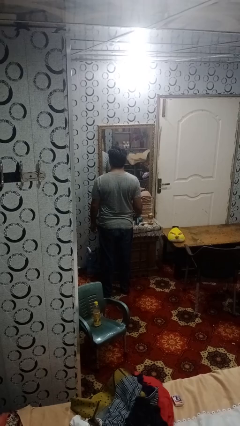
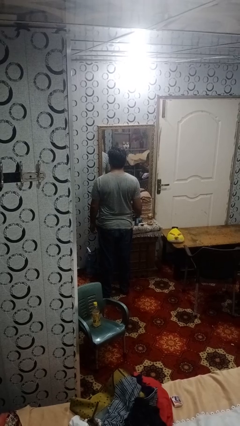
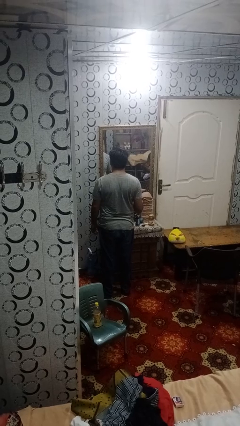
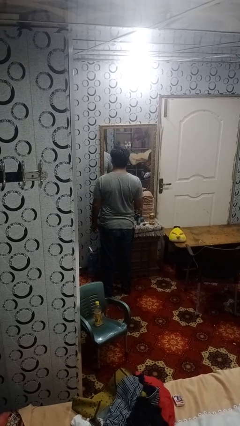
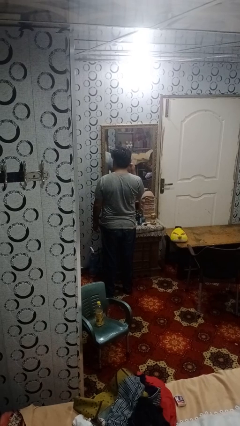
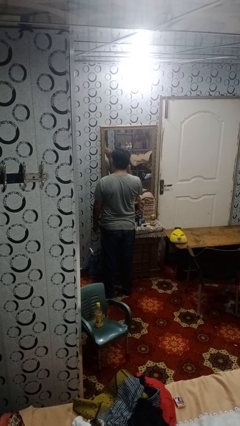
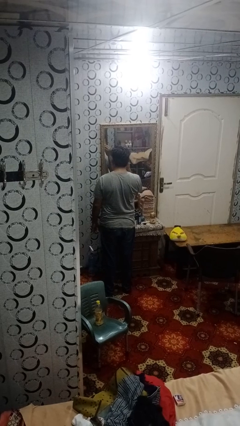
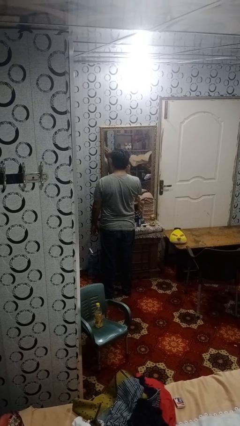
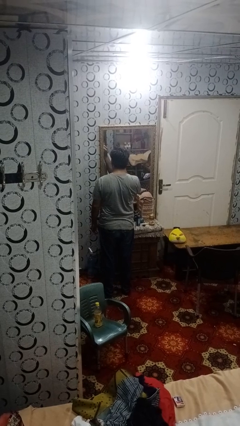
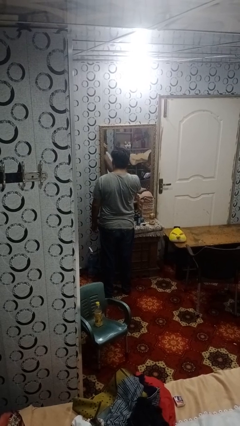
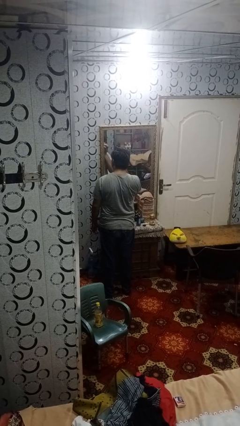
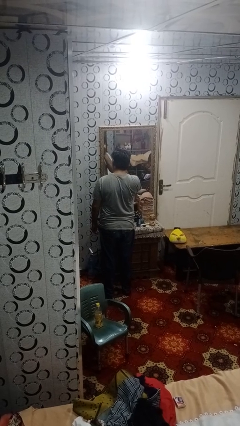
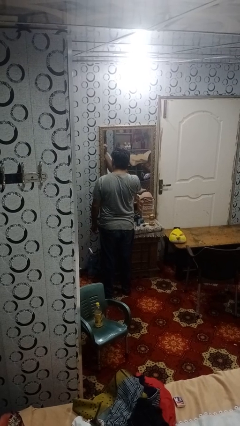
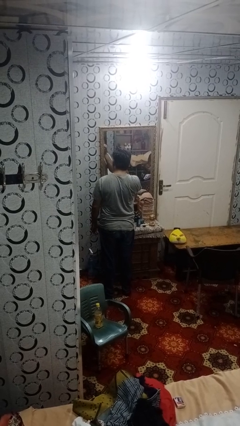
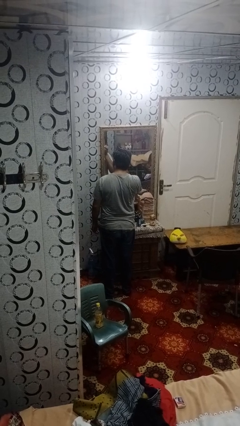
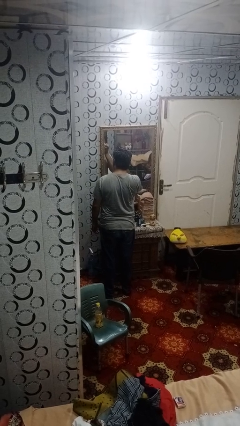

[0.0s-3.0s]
person applies foundation makeup

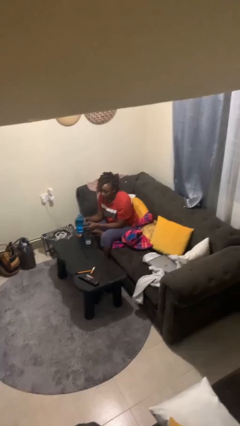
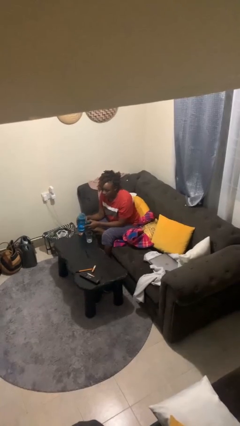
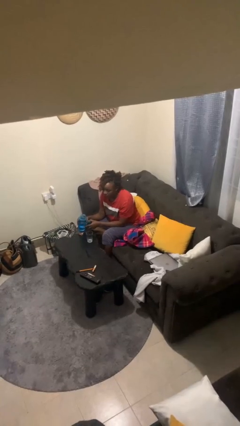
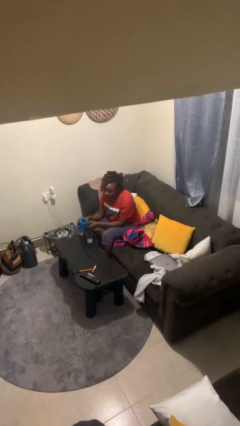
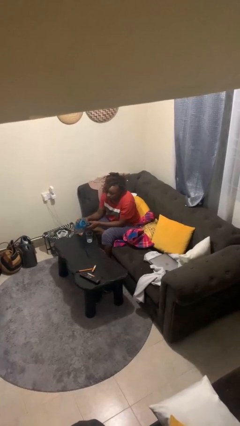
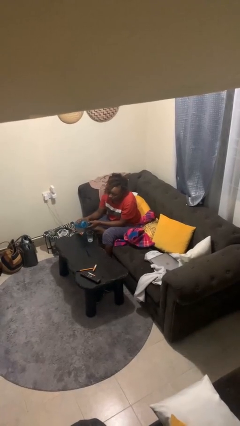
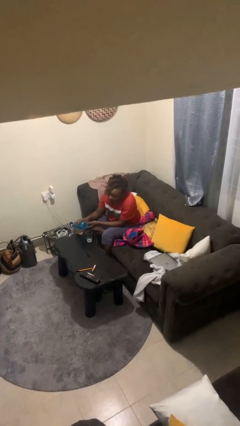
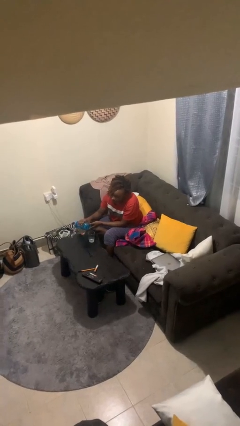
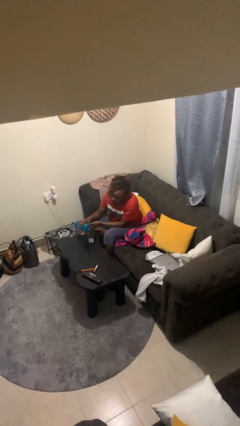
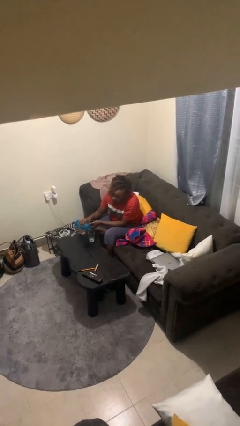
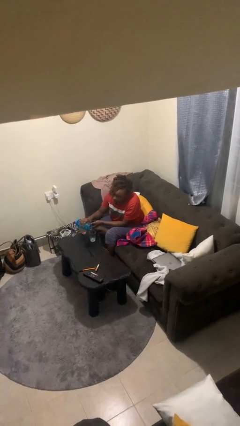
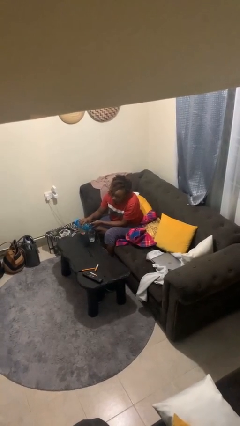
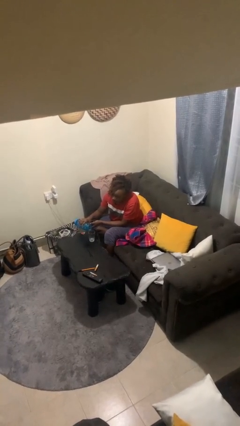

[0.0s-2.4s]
person pours liquid into cup

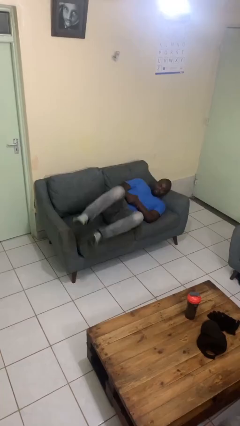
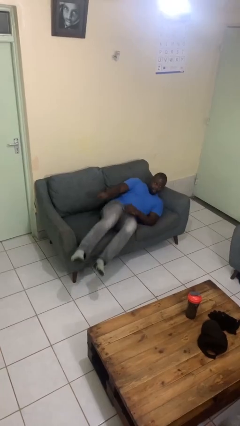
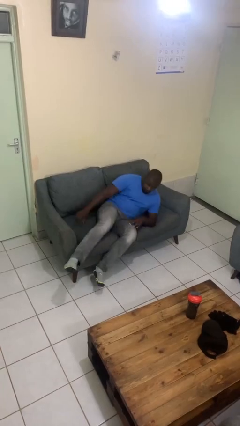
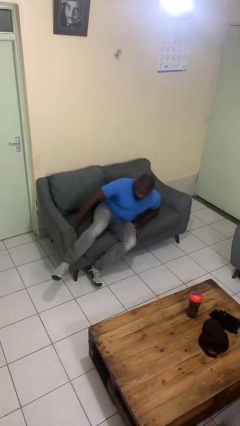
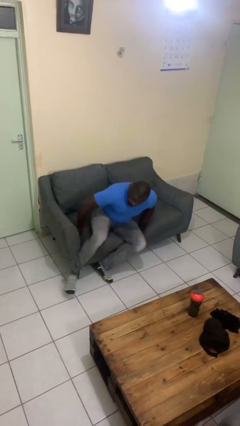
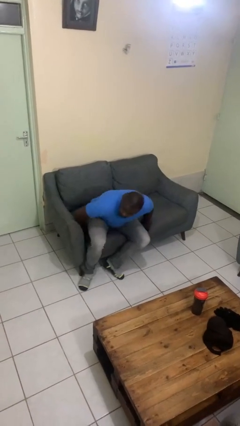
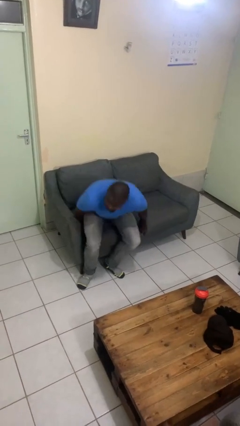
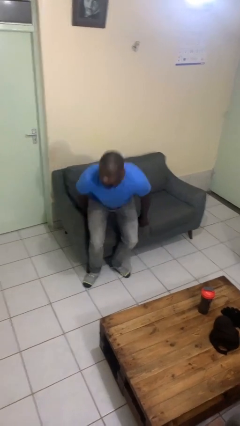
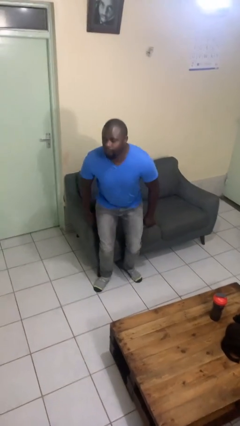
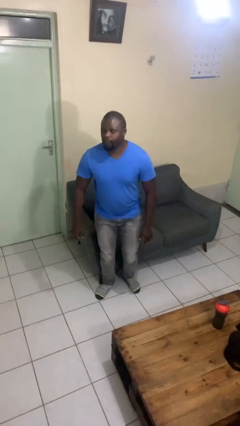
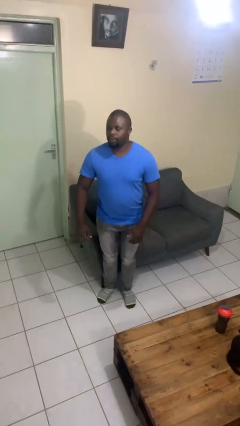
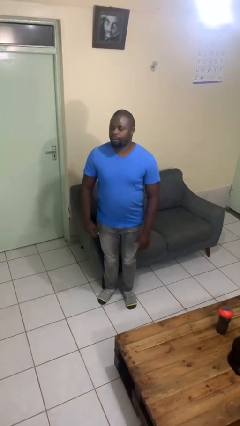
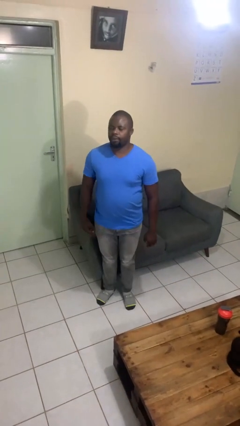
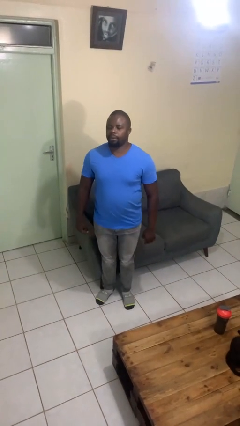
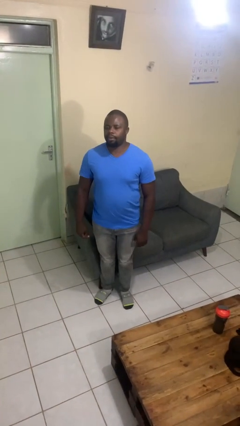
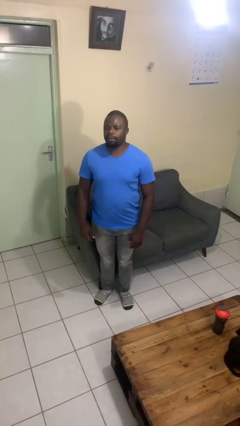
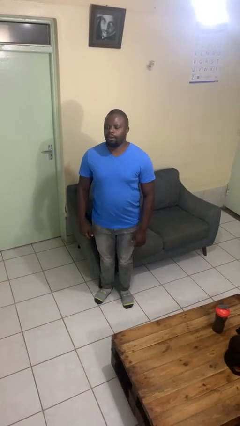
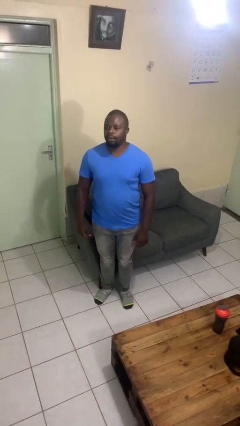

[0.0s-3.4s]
person stands up

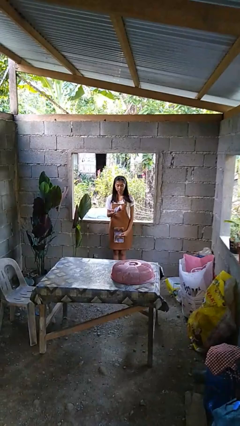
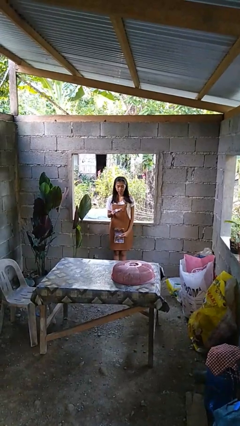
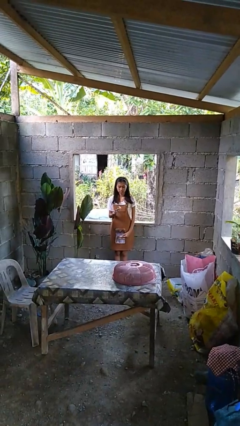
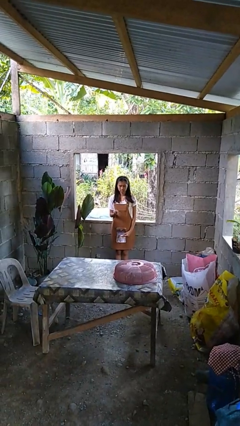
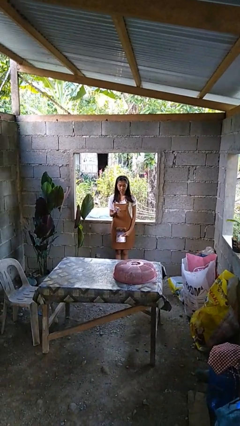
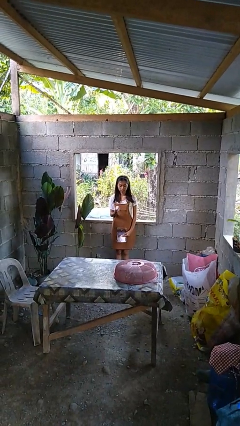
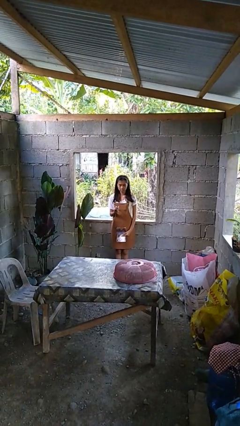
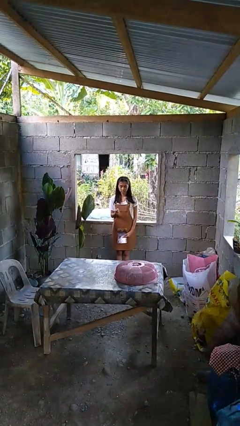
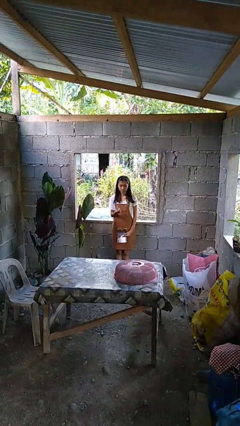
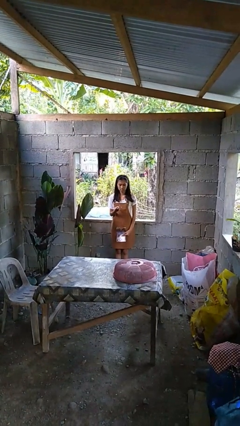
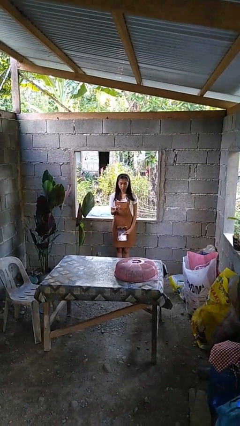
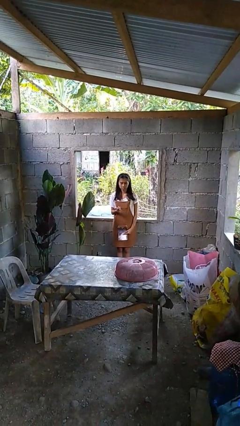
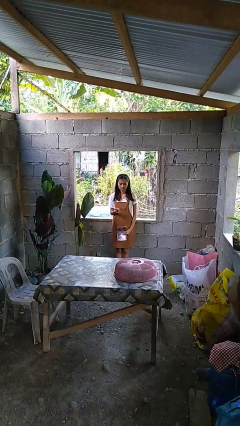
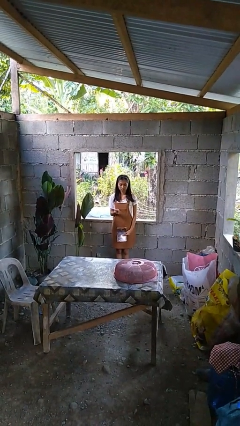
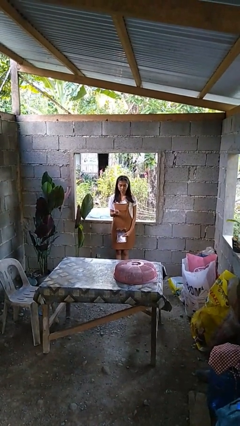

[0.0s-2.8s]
person crumples paper

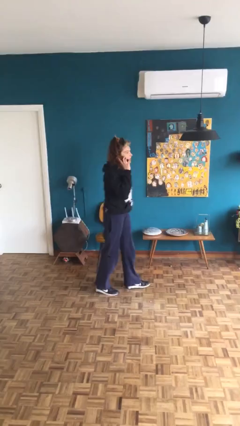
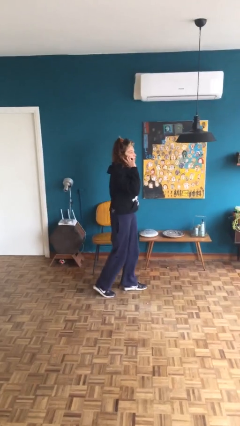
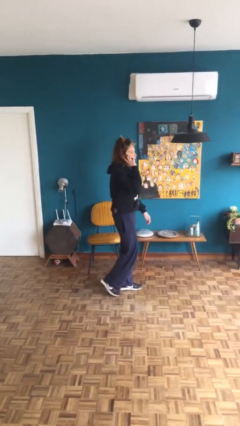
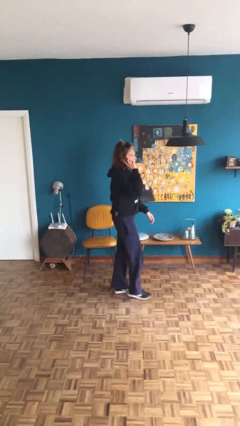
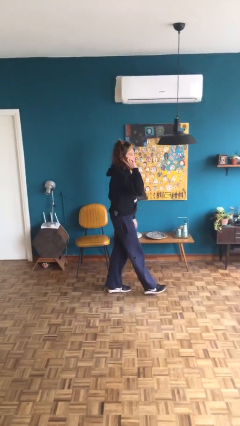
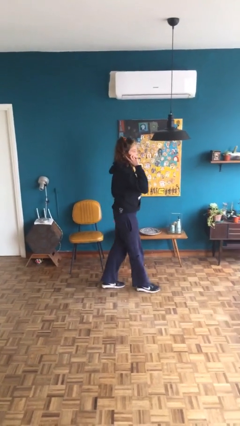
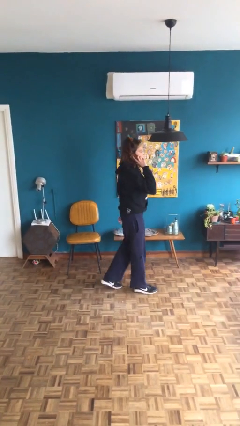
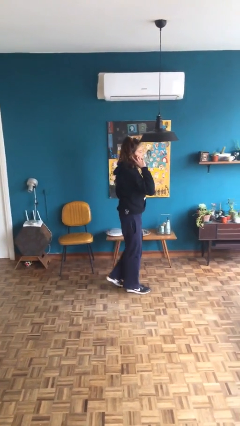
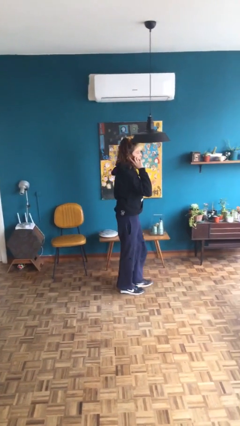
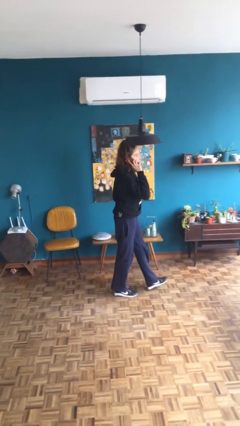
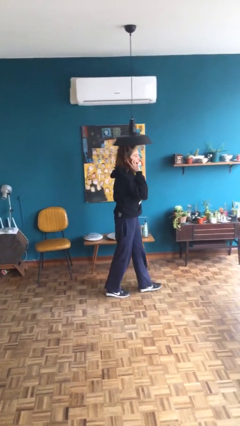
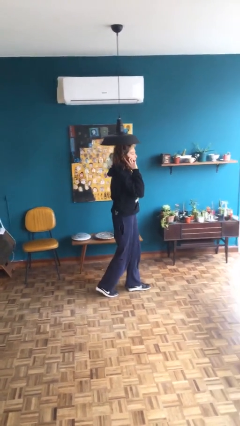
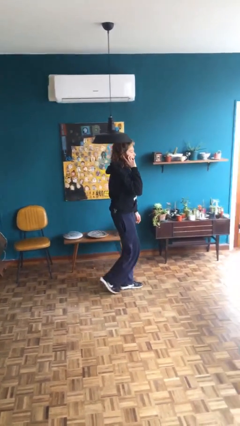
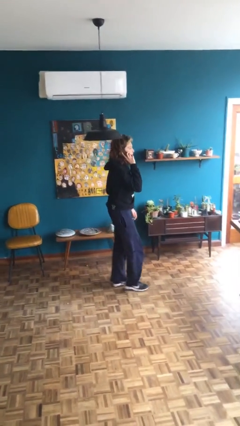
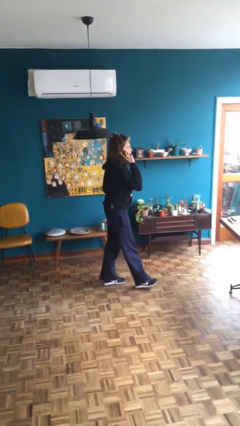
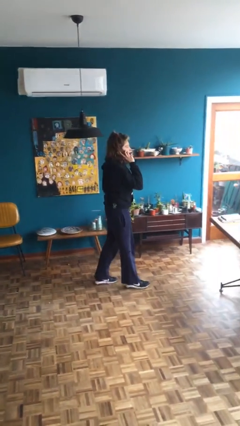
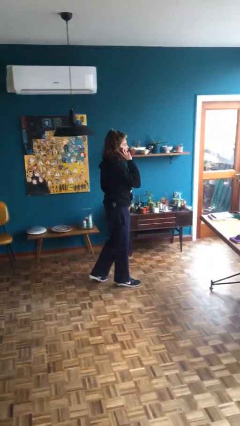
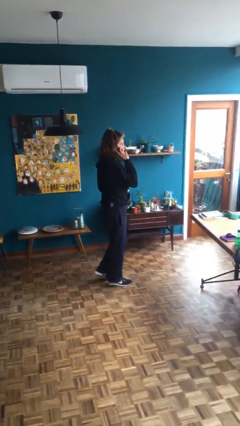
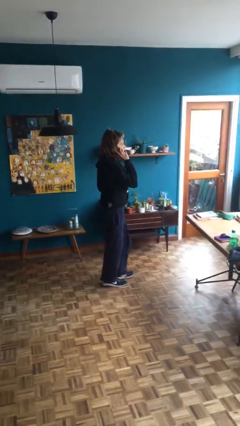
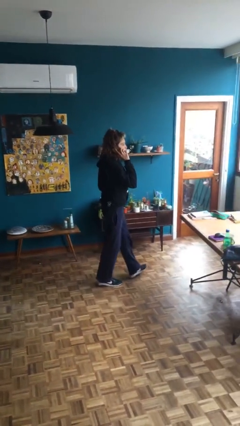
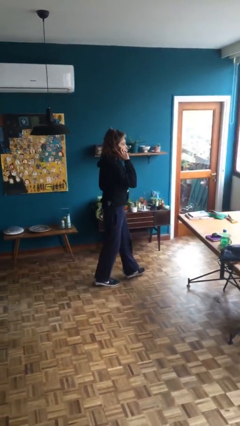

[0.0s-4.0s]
person talks on phone

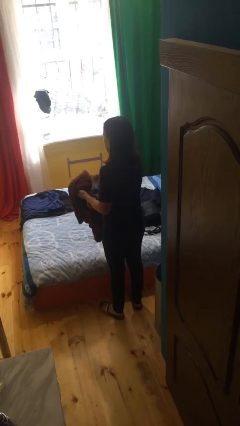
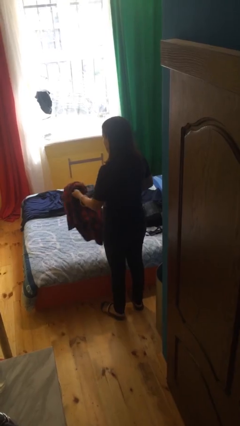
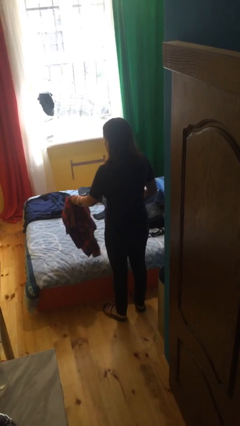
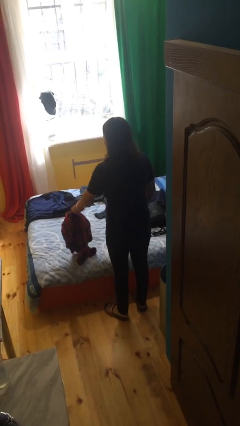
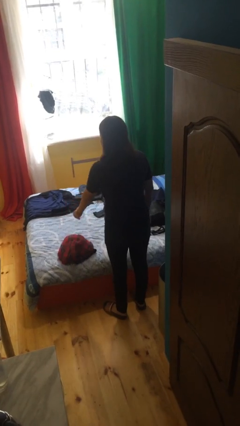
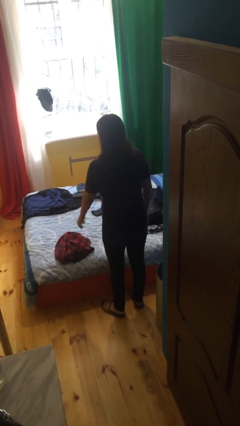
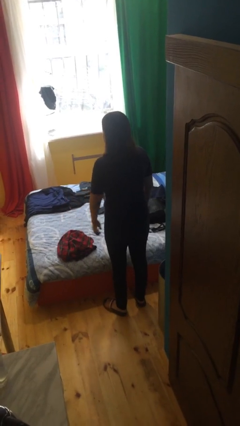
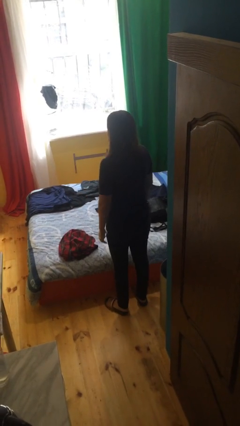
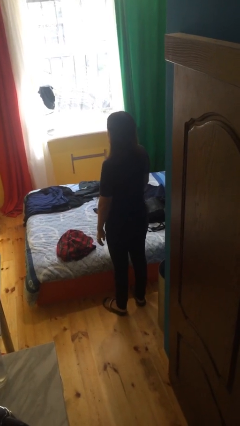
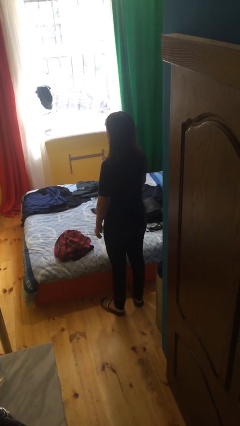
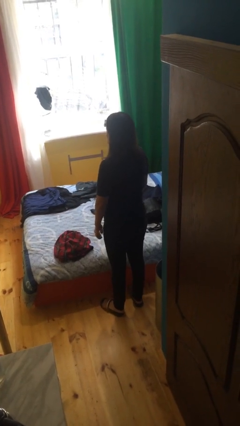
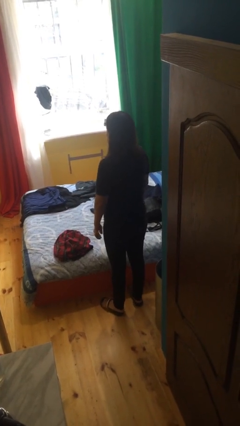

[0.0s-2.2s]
person puts down object on bed
